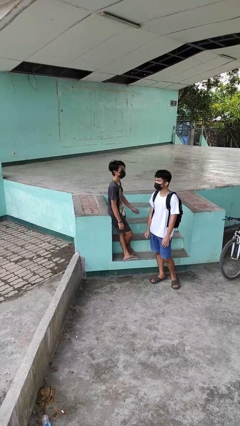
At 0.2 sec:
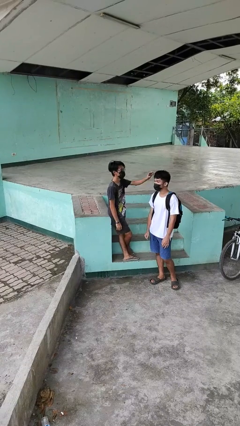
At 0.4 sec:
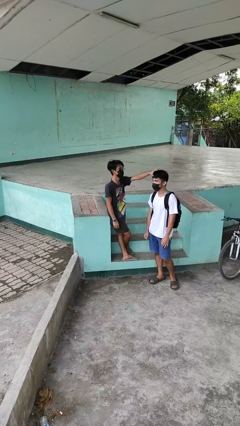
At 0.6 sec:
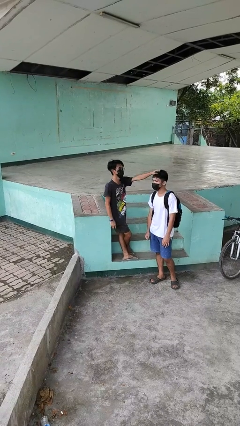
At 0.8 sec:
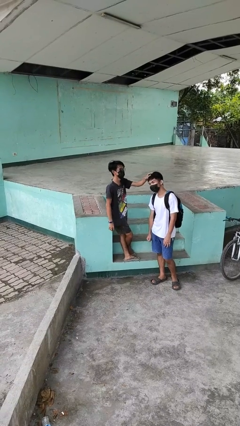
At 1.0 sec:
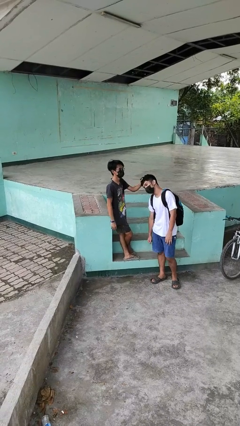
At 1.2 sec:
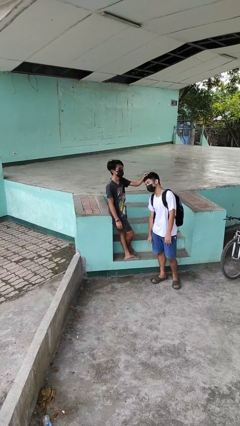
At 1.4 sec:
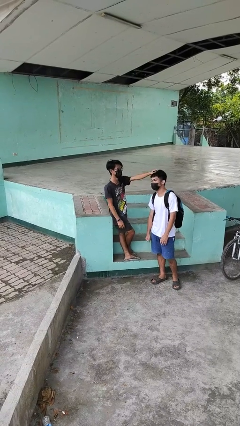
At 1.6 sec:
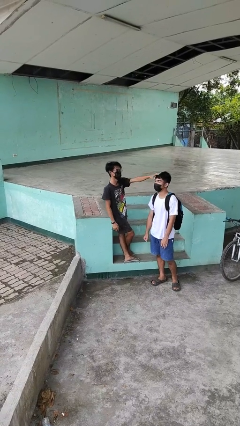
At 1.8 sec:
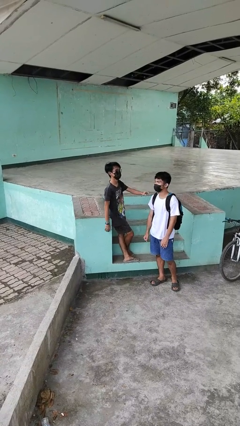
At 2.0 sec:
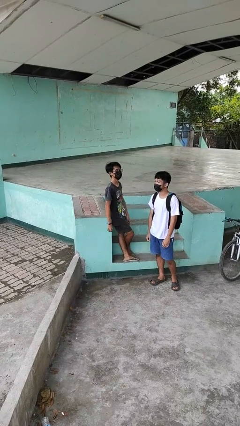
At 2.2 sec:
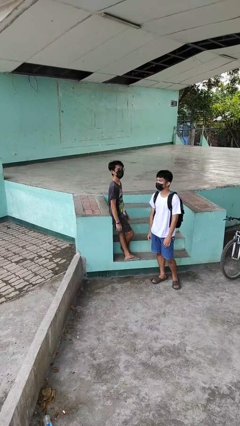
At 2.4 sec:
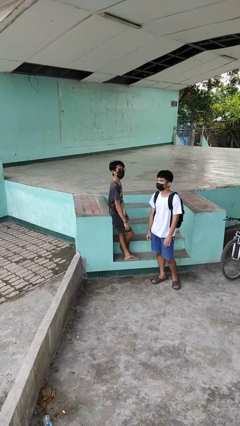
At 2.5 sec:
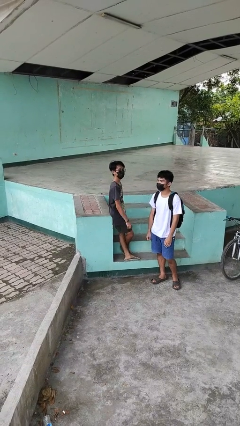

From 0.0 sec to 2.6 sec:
person grabs person by hair

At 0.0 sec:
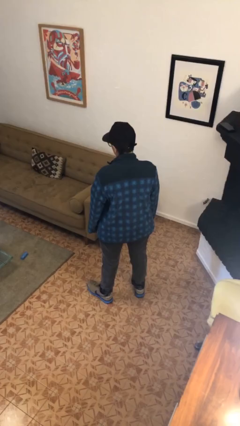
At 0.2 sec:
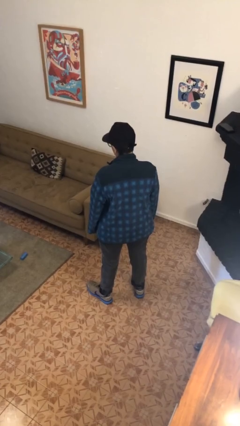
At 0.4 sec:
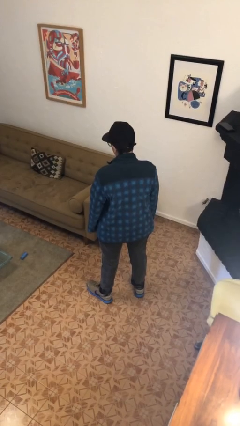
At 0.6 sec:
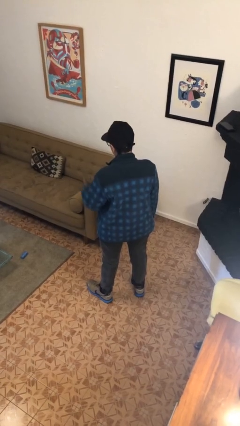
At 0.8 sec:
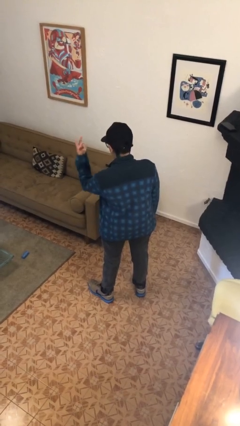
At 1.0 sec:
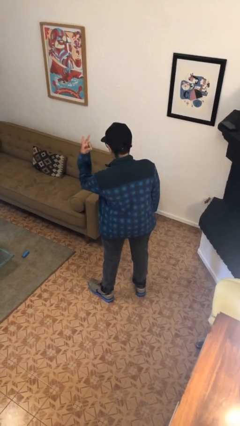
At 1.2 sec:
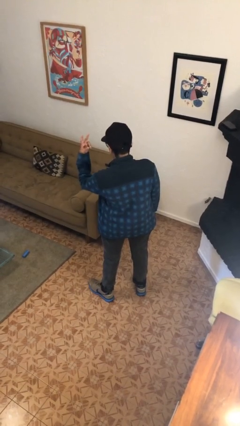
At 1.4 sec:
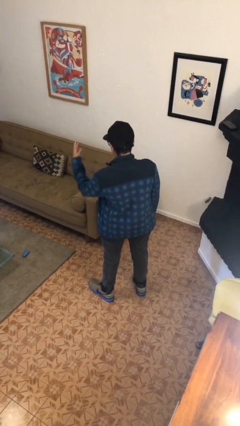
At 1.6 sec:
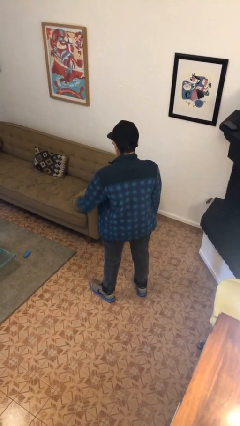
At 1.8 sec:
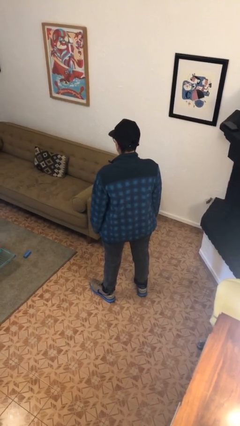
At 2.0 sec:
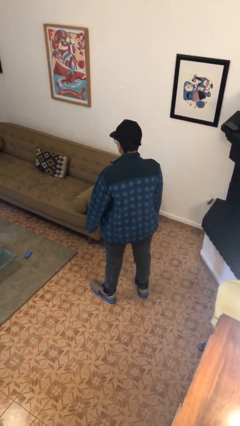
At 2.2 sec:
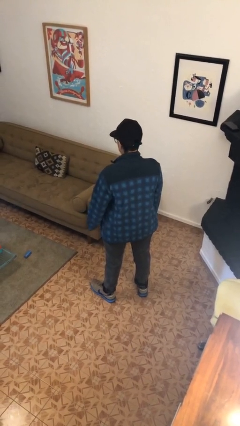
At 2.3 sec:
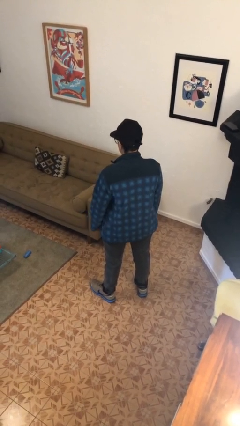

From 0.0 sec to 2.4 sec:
person gestures peace

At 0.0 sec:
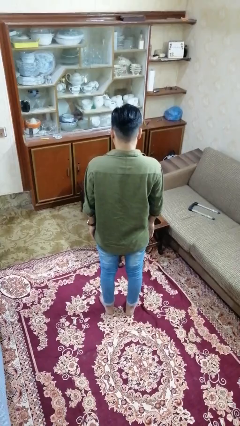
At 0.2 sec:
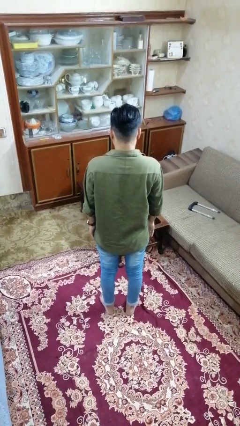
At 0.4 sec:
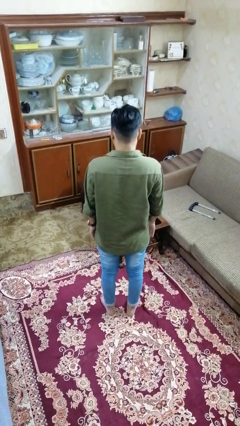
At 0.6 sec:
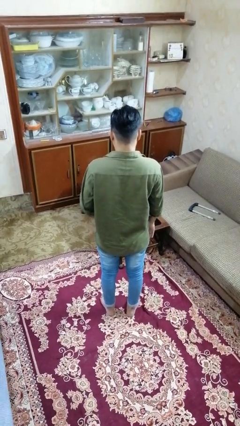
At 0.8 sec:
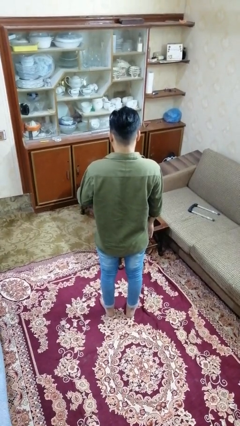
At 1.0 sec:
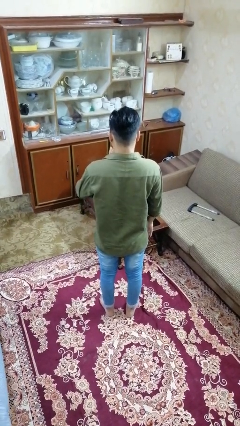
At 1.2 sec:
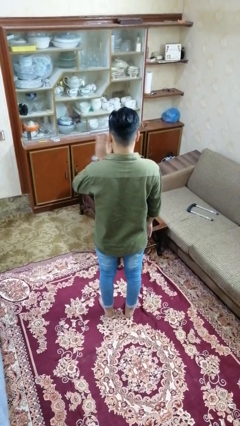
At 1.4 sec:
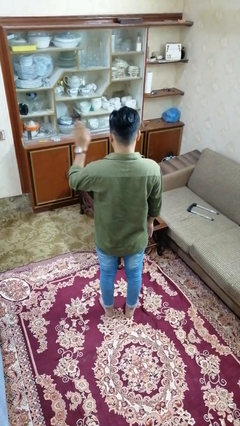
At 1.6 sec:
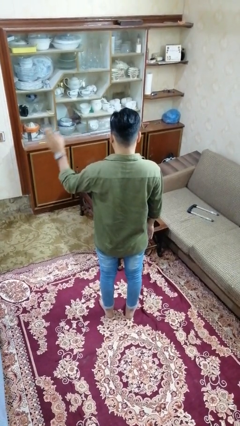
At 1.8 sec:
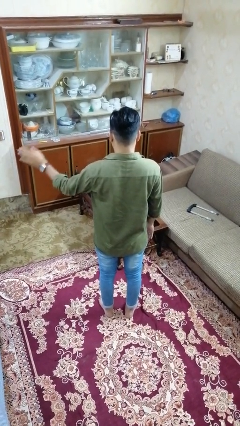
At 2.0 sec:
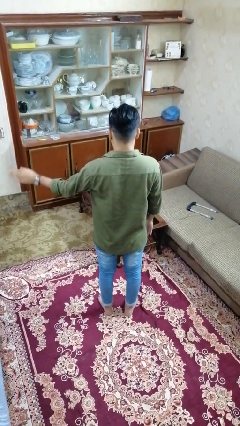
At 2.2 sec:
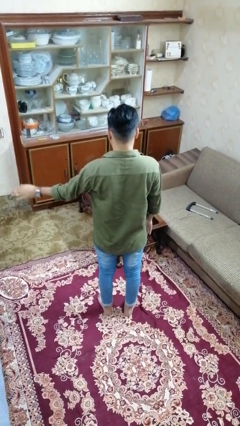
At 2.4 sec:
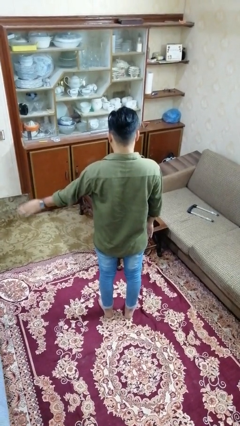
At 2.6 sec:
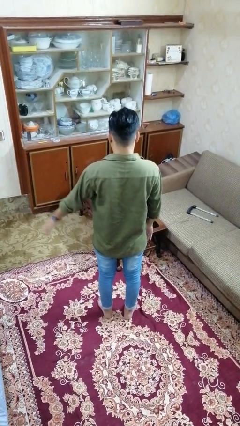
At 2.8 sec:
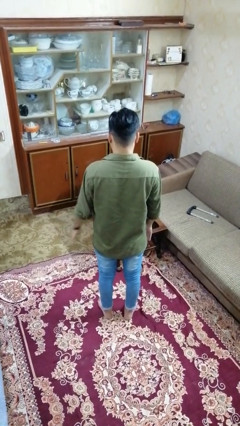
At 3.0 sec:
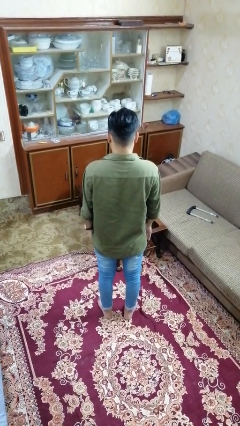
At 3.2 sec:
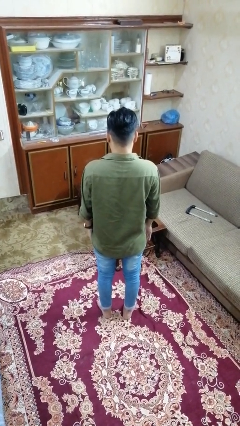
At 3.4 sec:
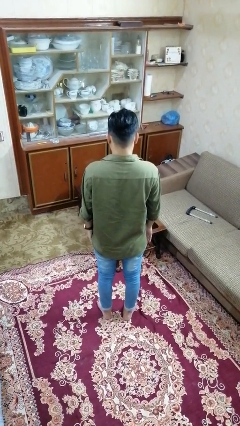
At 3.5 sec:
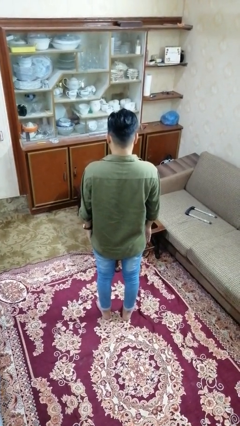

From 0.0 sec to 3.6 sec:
person gestures swipe left

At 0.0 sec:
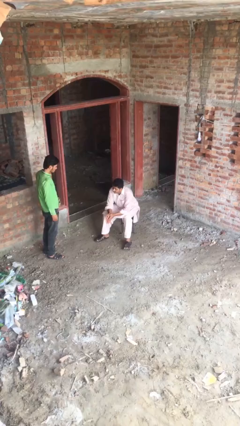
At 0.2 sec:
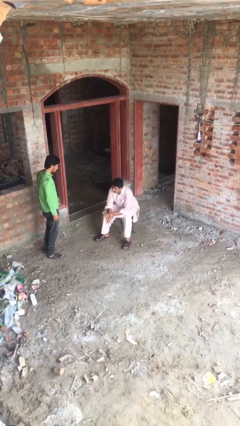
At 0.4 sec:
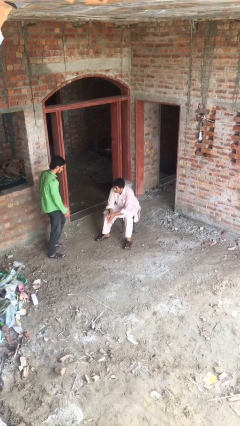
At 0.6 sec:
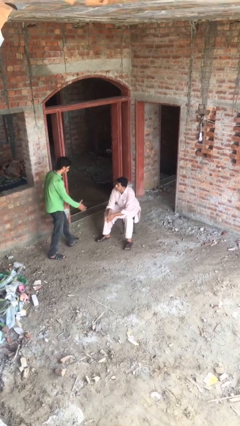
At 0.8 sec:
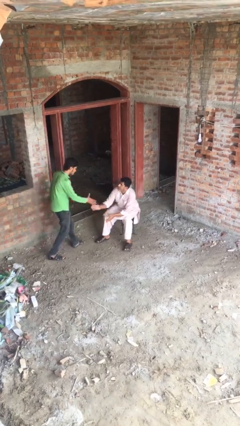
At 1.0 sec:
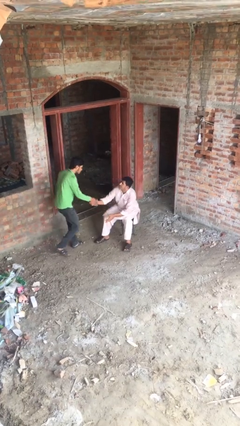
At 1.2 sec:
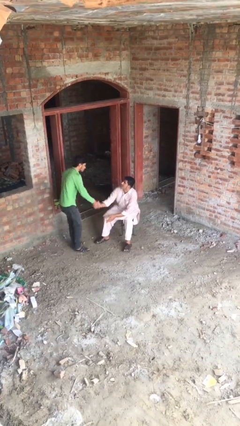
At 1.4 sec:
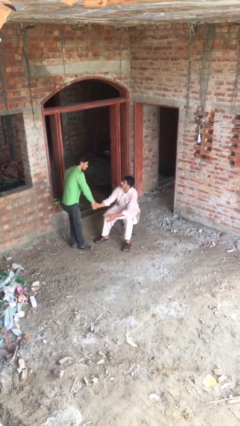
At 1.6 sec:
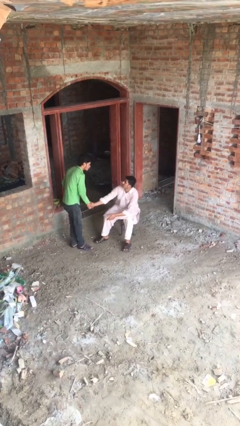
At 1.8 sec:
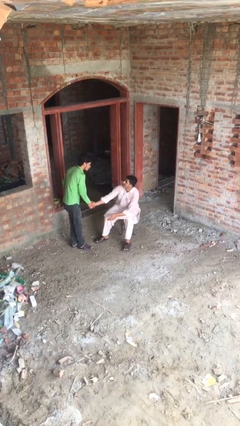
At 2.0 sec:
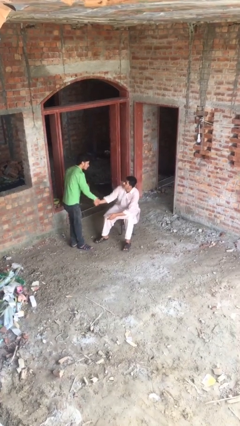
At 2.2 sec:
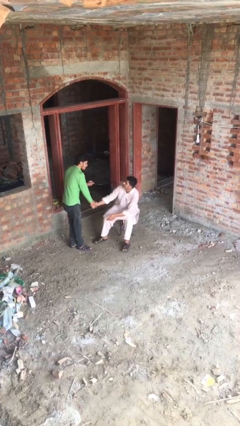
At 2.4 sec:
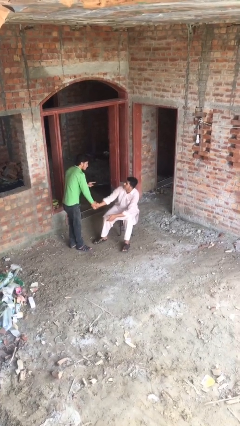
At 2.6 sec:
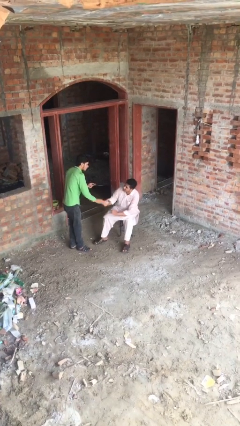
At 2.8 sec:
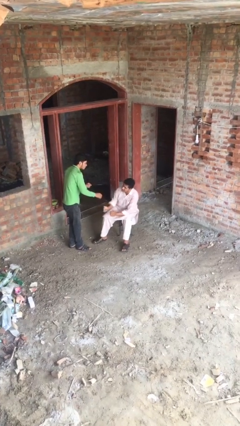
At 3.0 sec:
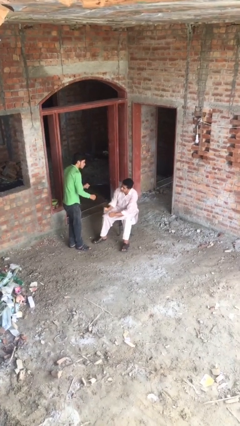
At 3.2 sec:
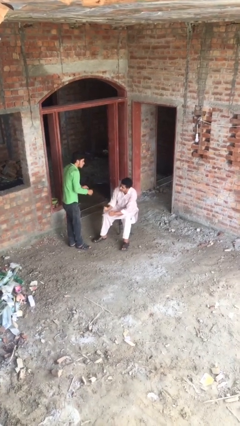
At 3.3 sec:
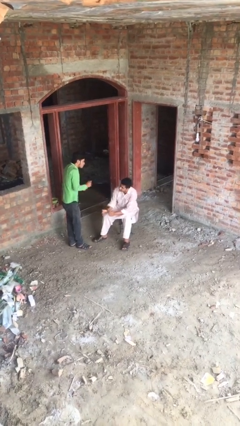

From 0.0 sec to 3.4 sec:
person shakes hand

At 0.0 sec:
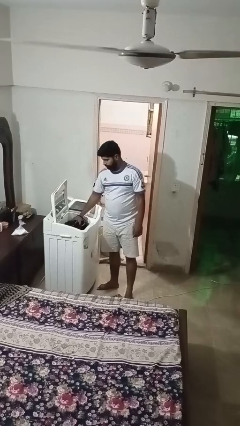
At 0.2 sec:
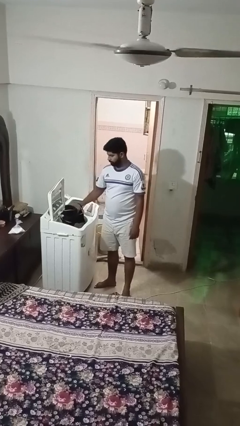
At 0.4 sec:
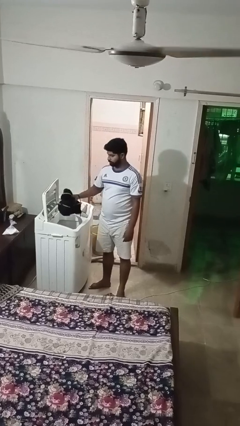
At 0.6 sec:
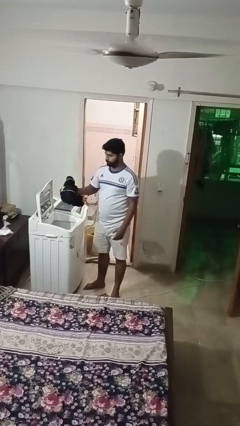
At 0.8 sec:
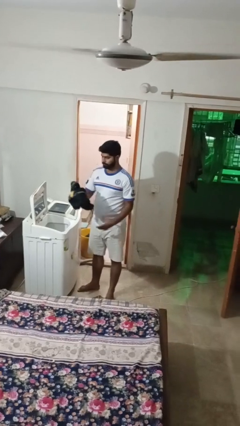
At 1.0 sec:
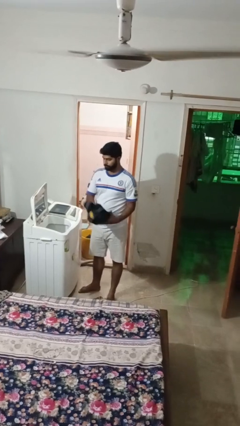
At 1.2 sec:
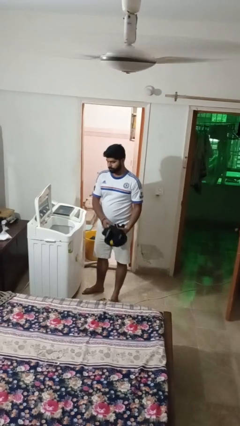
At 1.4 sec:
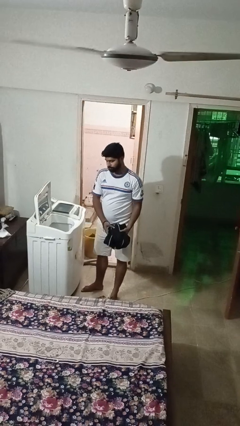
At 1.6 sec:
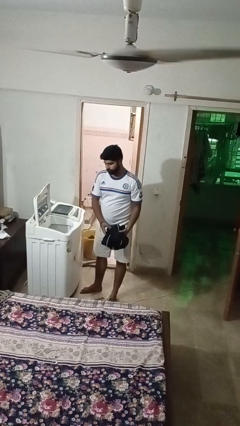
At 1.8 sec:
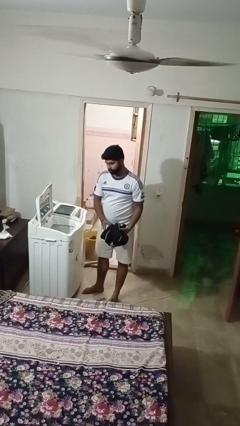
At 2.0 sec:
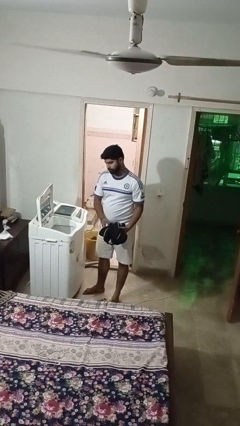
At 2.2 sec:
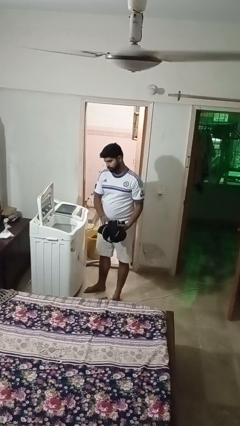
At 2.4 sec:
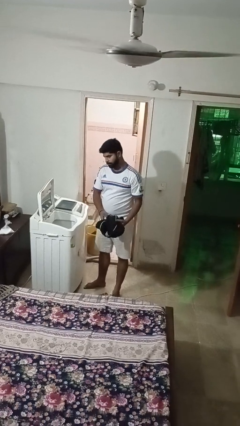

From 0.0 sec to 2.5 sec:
person unloads clotheswasher

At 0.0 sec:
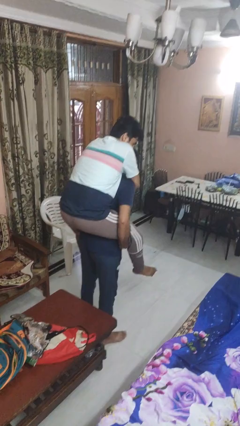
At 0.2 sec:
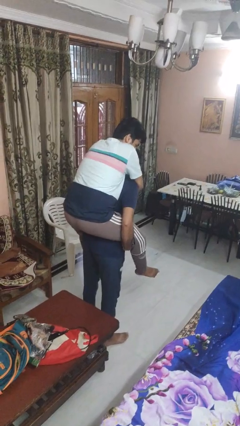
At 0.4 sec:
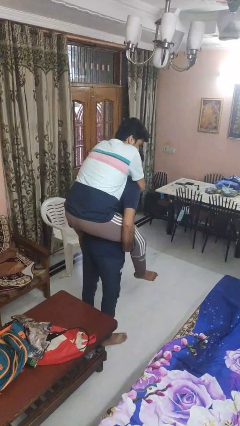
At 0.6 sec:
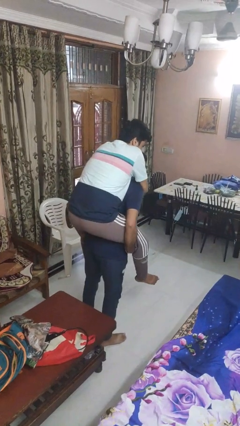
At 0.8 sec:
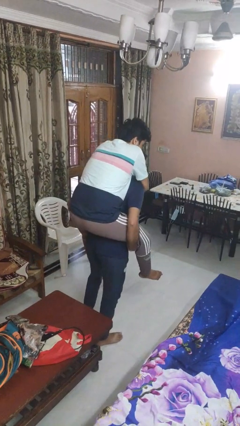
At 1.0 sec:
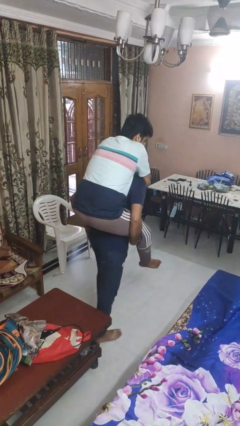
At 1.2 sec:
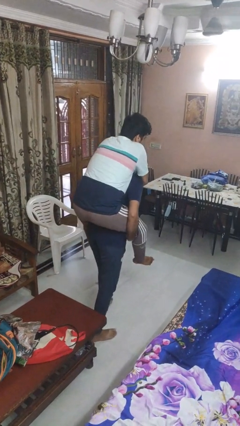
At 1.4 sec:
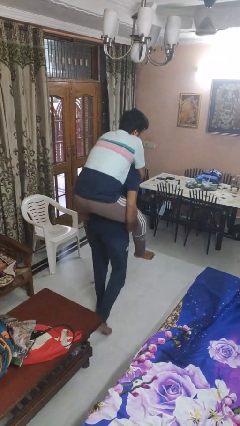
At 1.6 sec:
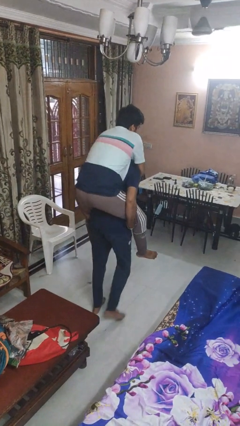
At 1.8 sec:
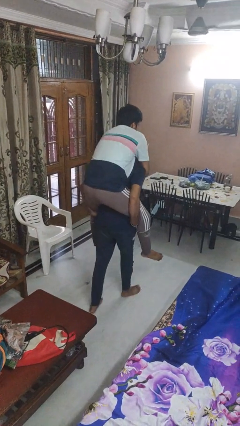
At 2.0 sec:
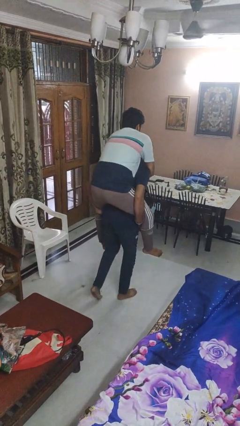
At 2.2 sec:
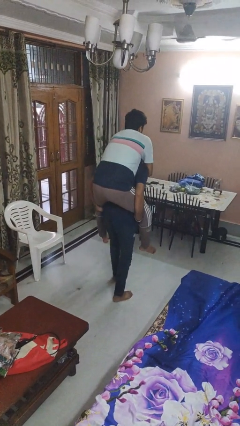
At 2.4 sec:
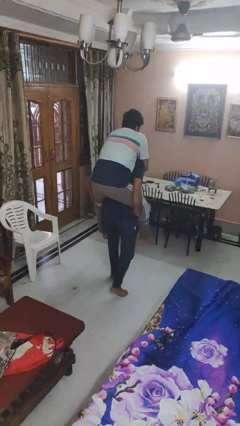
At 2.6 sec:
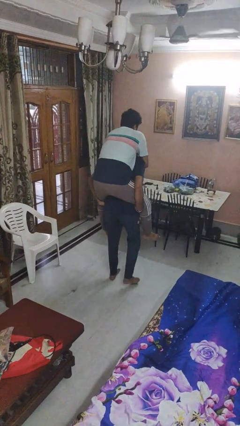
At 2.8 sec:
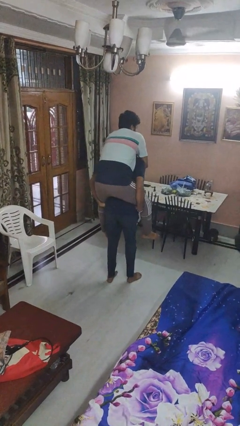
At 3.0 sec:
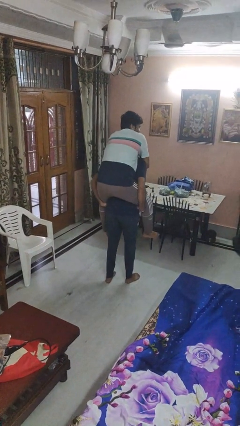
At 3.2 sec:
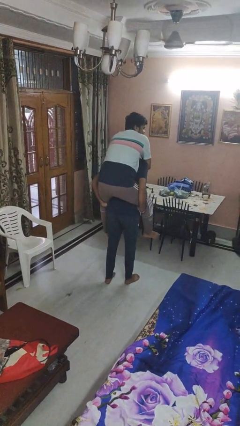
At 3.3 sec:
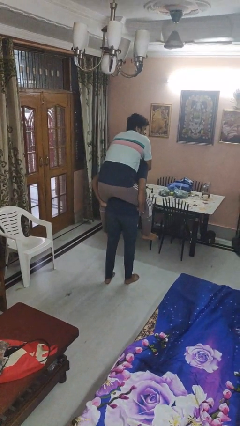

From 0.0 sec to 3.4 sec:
person carries person on back
